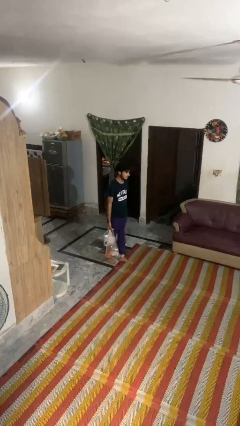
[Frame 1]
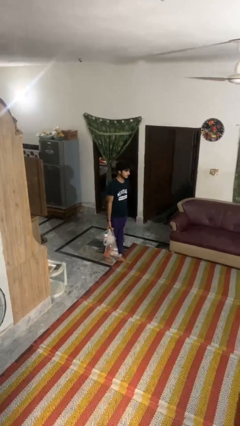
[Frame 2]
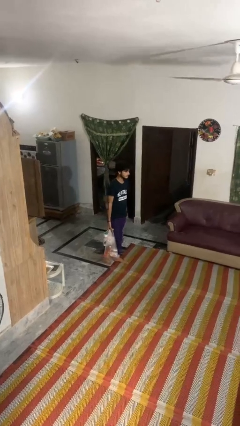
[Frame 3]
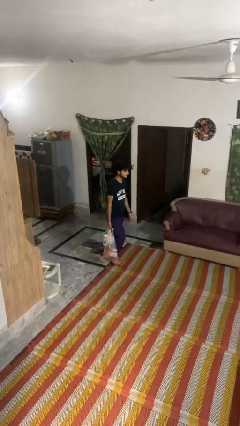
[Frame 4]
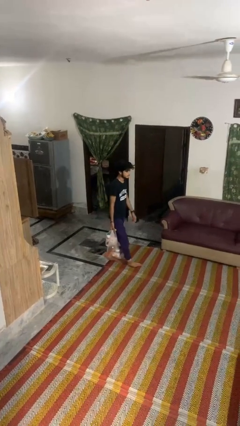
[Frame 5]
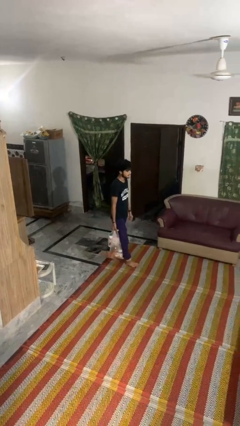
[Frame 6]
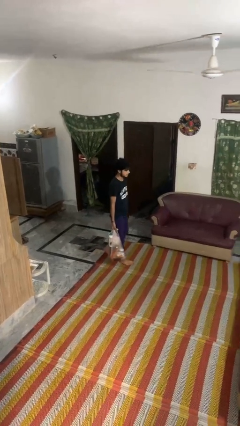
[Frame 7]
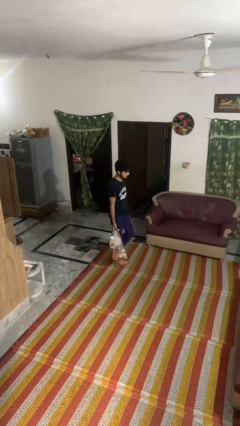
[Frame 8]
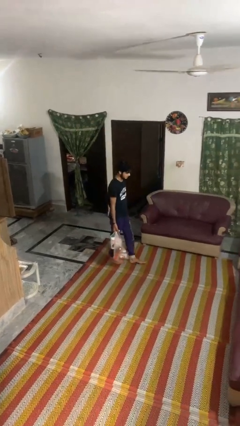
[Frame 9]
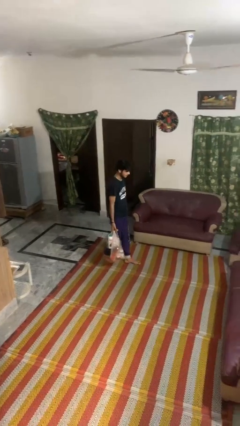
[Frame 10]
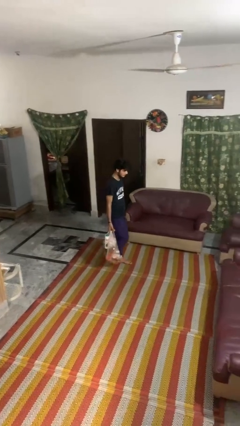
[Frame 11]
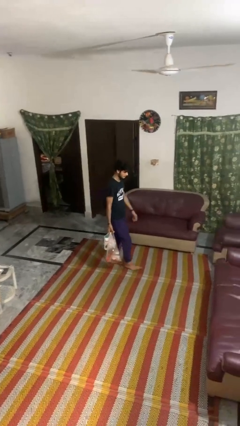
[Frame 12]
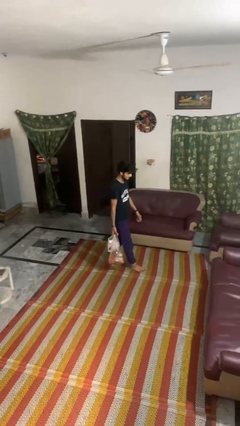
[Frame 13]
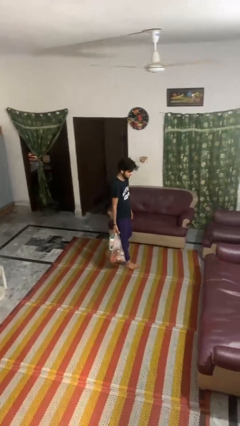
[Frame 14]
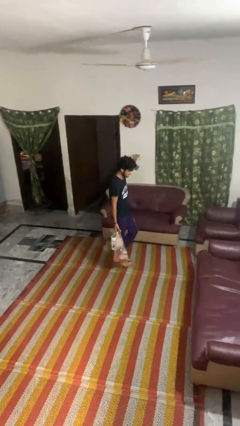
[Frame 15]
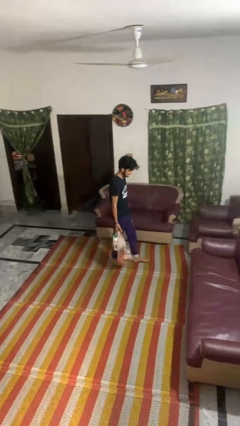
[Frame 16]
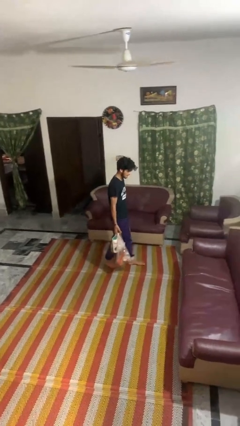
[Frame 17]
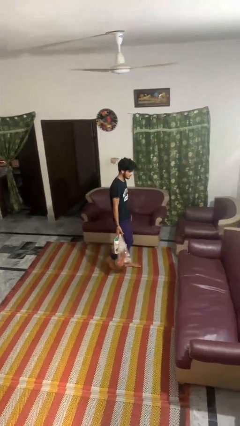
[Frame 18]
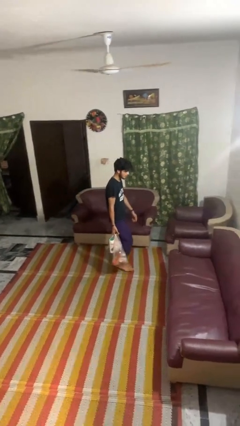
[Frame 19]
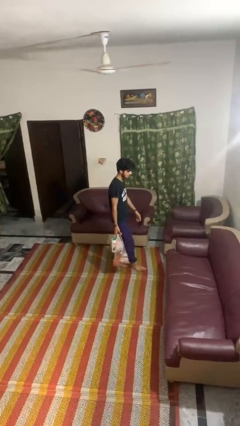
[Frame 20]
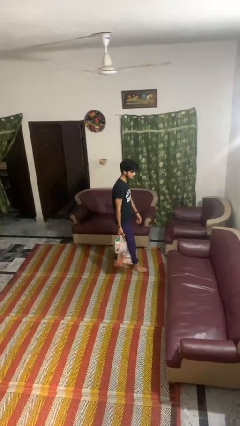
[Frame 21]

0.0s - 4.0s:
person carries groceries

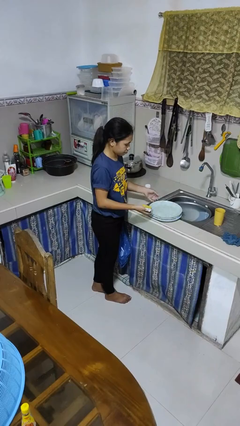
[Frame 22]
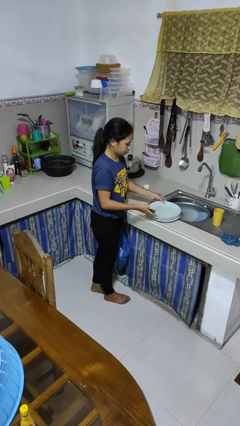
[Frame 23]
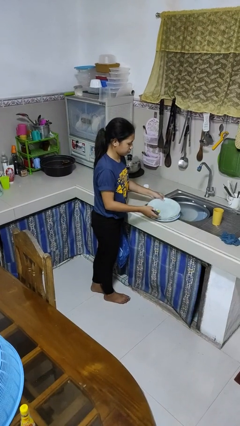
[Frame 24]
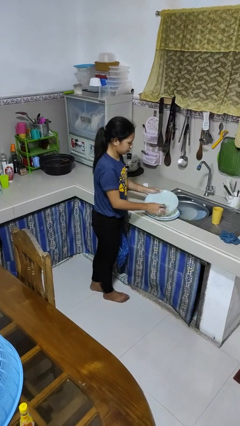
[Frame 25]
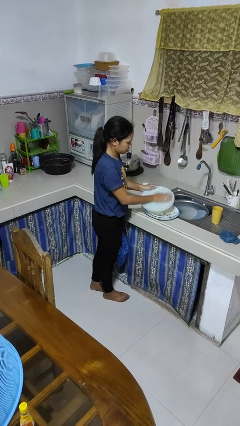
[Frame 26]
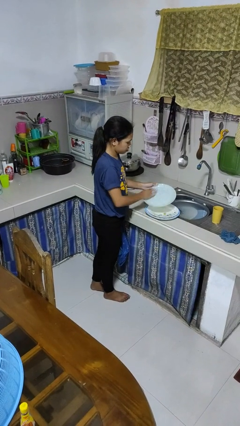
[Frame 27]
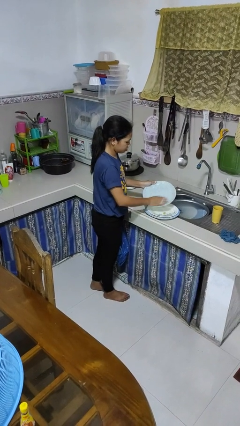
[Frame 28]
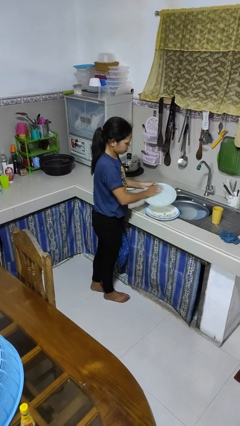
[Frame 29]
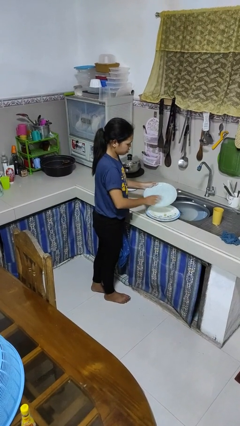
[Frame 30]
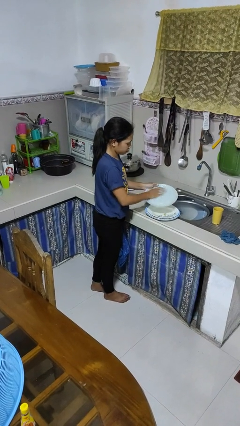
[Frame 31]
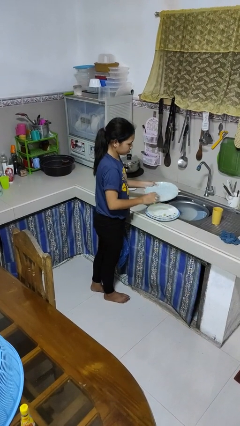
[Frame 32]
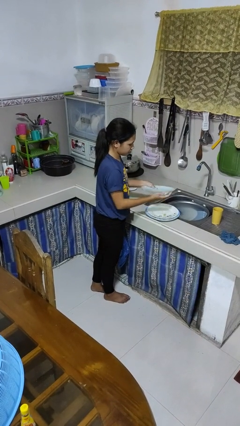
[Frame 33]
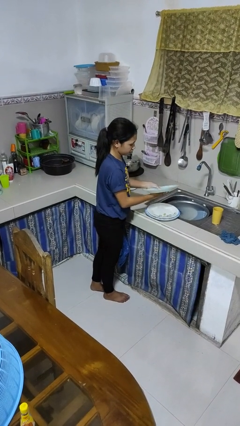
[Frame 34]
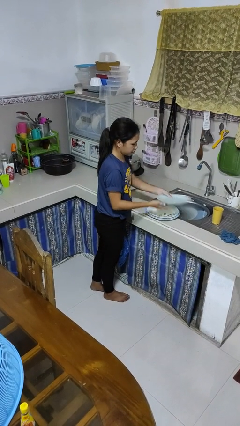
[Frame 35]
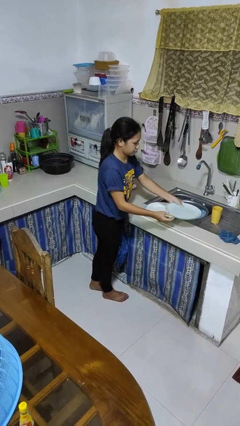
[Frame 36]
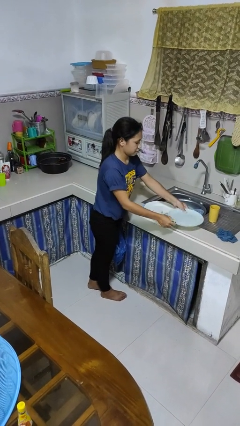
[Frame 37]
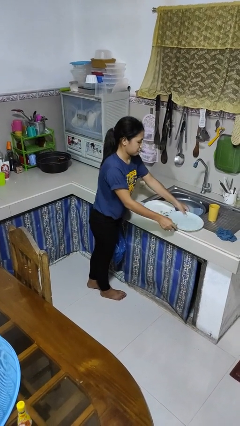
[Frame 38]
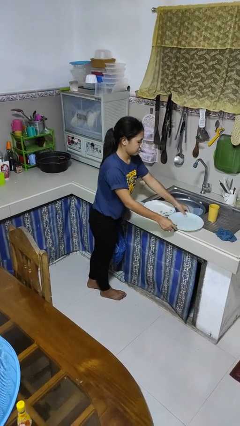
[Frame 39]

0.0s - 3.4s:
person washes dish

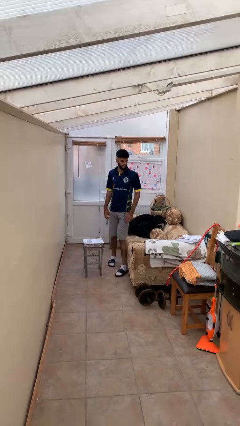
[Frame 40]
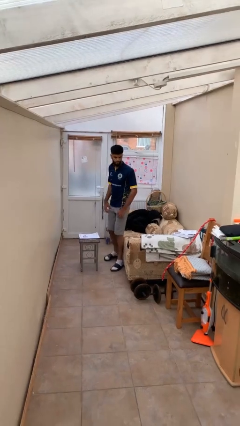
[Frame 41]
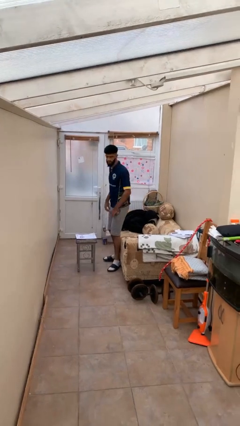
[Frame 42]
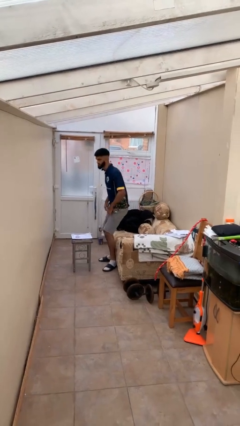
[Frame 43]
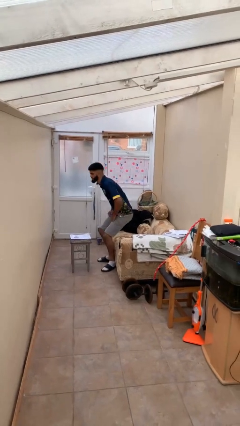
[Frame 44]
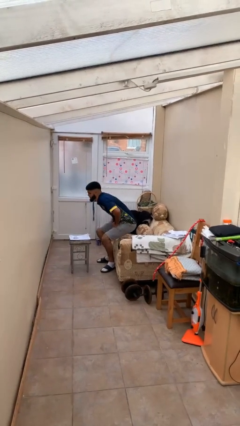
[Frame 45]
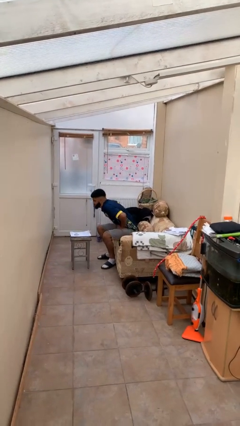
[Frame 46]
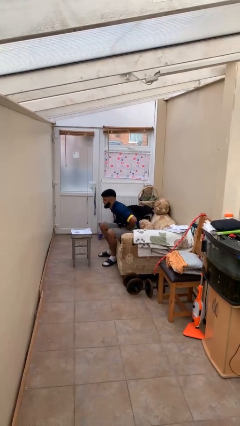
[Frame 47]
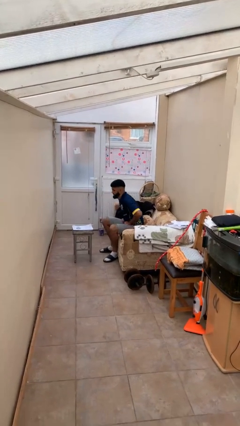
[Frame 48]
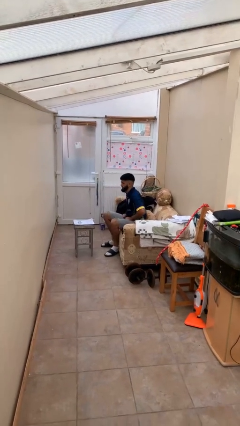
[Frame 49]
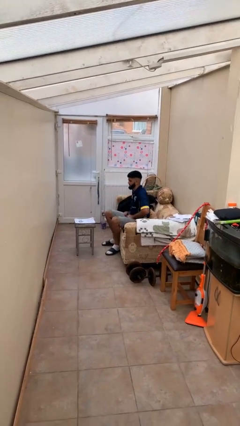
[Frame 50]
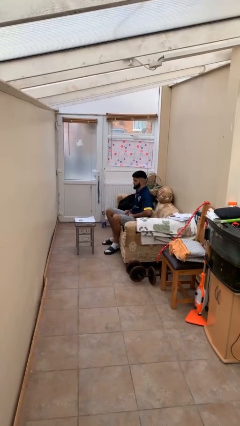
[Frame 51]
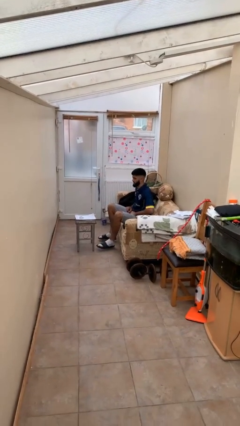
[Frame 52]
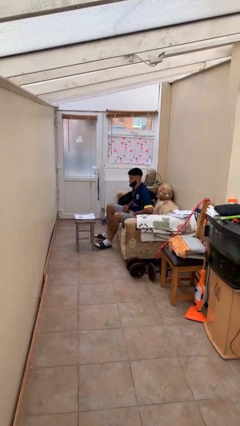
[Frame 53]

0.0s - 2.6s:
person sits down

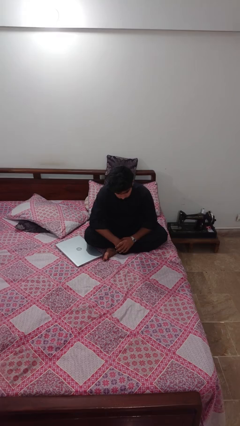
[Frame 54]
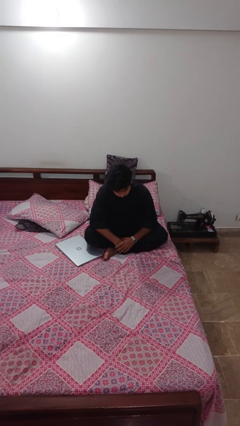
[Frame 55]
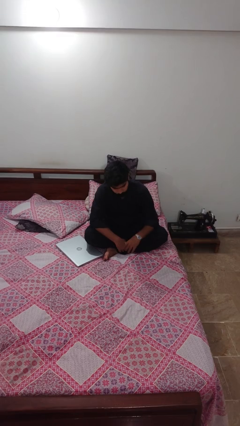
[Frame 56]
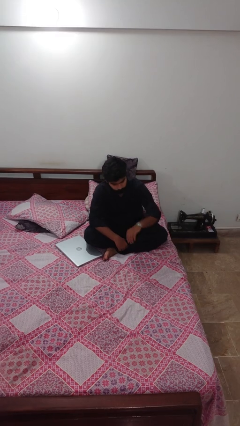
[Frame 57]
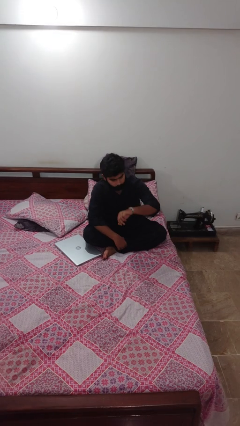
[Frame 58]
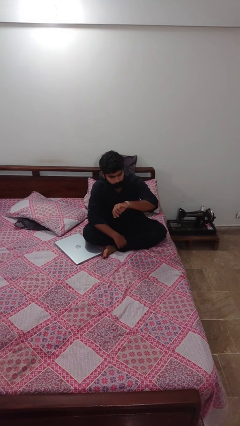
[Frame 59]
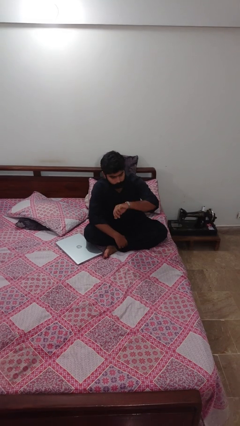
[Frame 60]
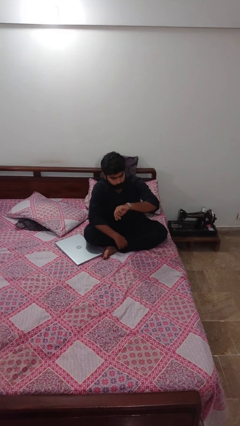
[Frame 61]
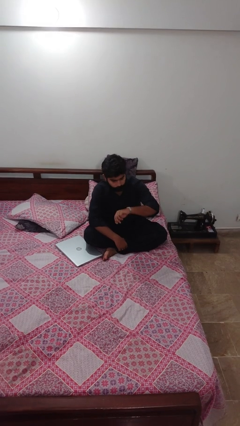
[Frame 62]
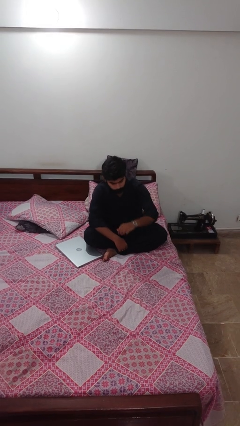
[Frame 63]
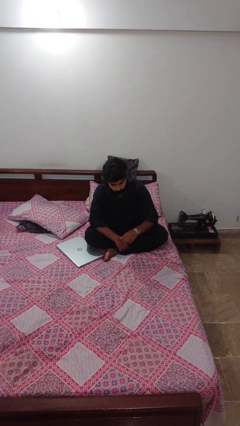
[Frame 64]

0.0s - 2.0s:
person looks at wristwatch

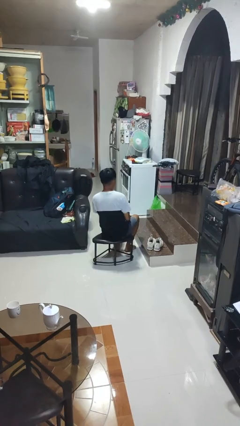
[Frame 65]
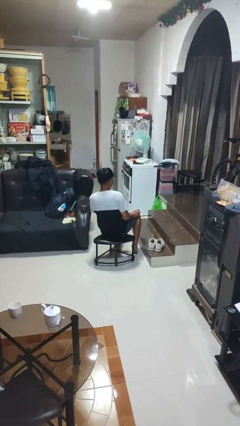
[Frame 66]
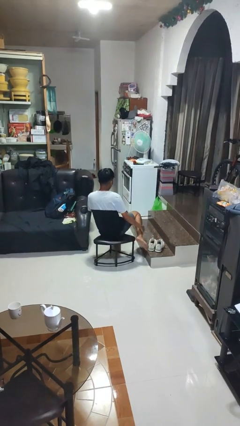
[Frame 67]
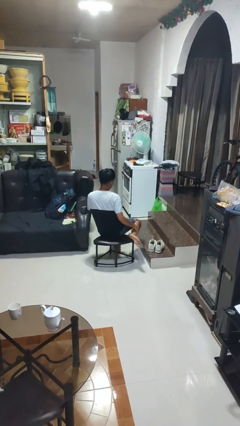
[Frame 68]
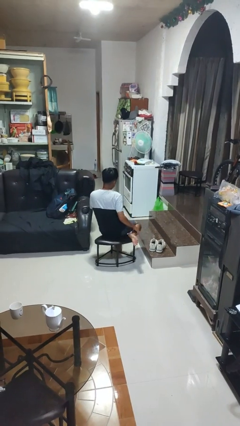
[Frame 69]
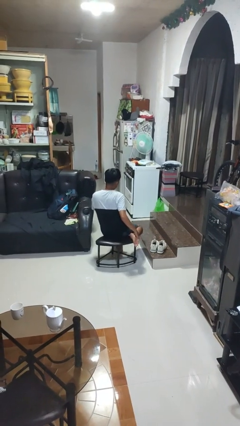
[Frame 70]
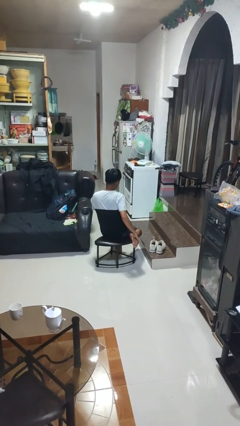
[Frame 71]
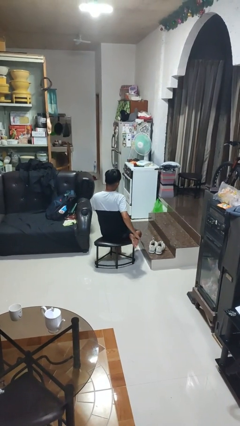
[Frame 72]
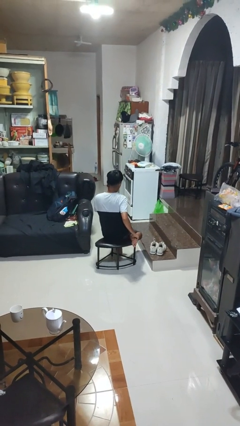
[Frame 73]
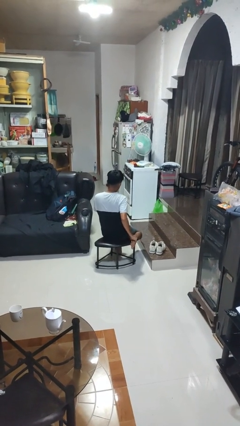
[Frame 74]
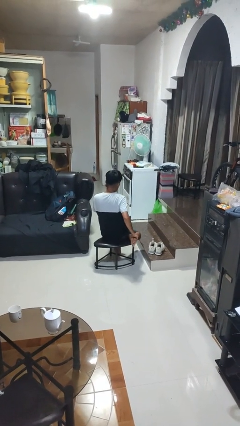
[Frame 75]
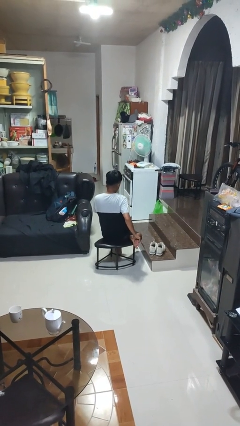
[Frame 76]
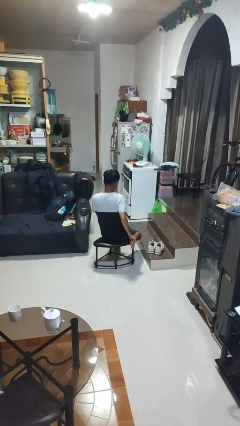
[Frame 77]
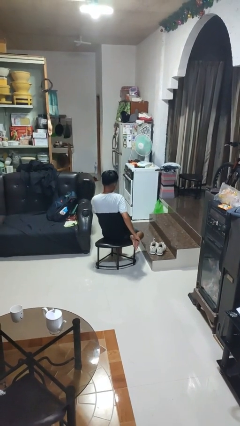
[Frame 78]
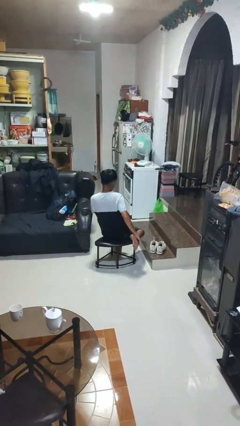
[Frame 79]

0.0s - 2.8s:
person rubs foot

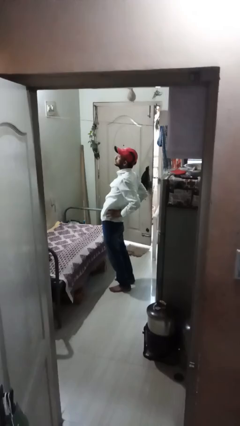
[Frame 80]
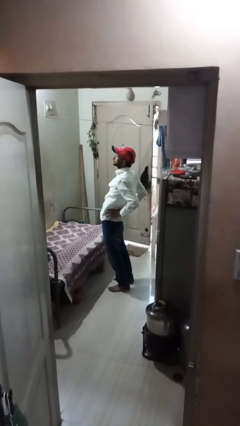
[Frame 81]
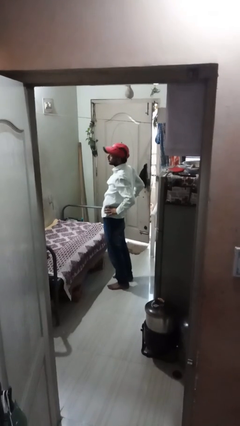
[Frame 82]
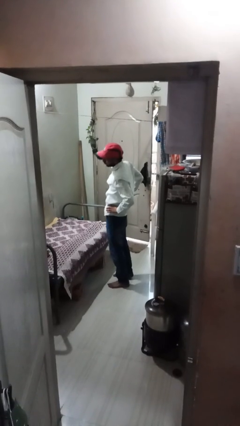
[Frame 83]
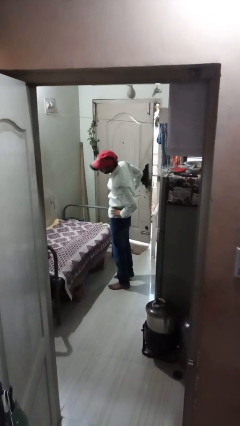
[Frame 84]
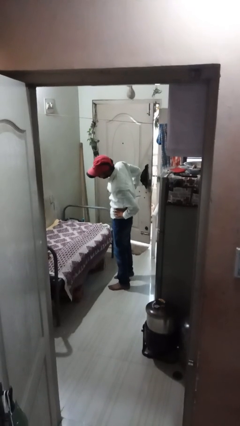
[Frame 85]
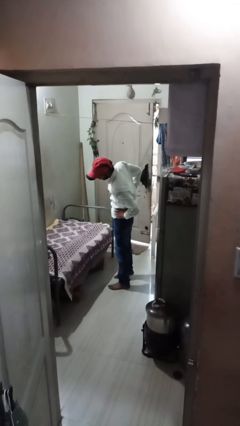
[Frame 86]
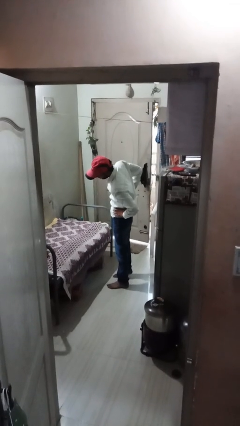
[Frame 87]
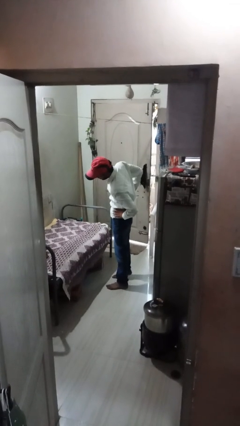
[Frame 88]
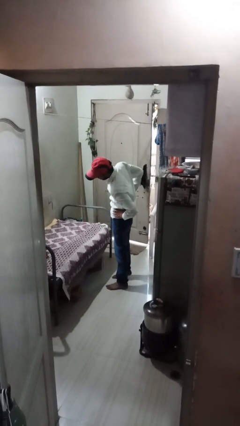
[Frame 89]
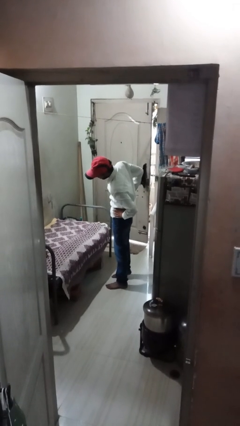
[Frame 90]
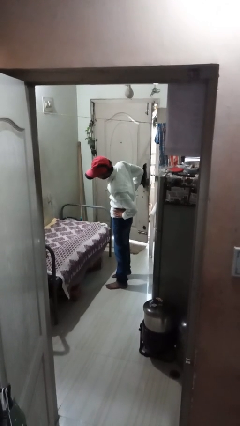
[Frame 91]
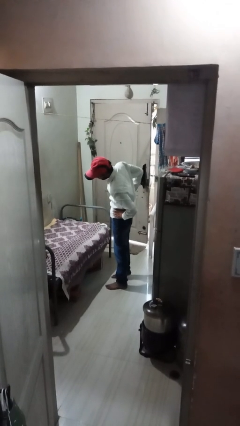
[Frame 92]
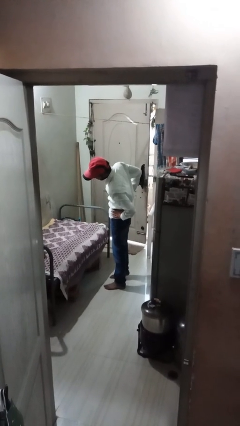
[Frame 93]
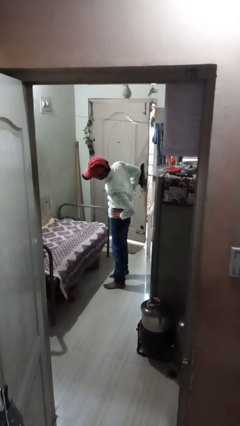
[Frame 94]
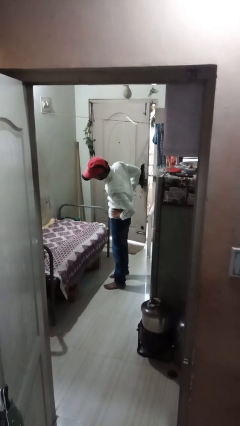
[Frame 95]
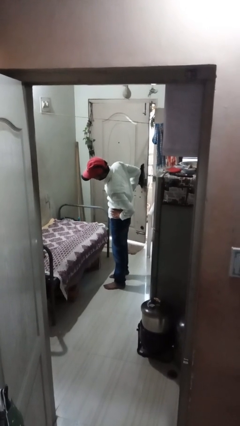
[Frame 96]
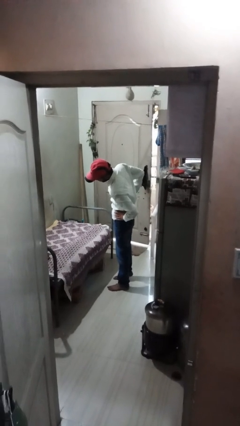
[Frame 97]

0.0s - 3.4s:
person stretches arms to side
